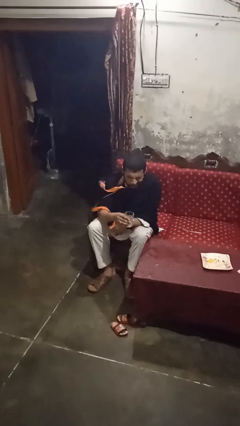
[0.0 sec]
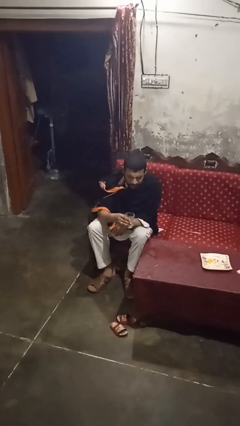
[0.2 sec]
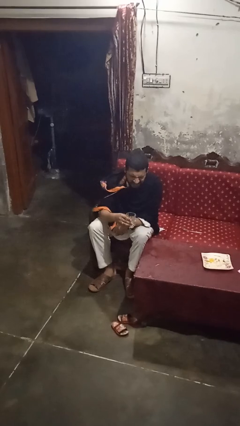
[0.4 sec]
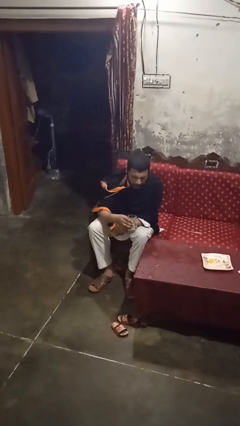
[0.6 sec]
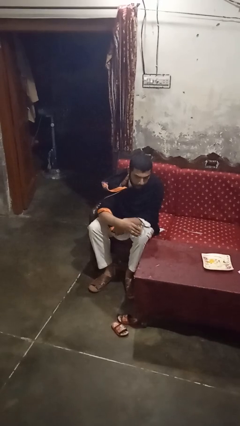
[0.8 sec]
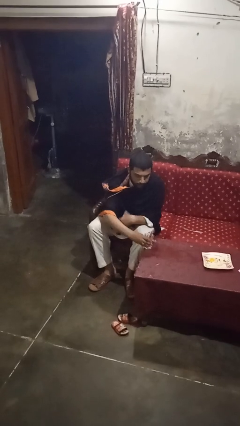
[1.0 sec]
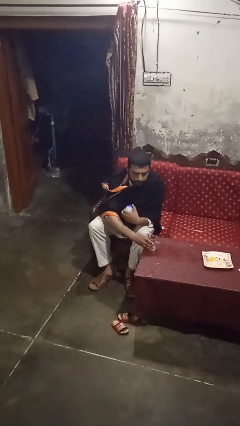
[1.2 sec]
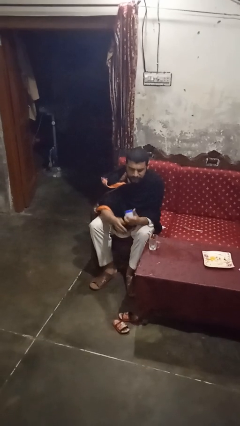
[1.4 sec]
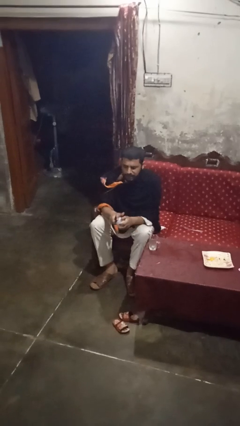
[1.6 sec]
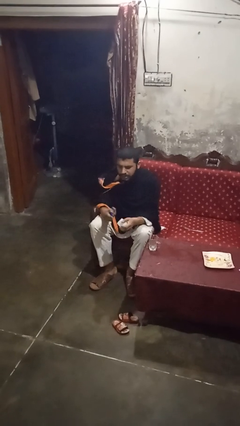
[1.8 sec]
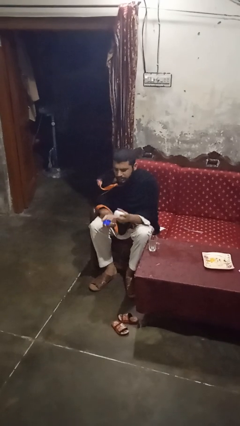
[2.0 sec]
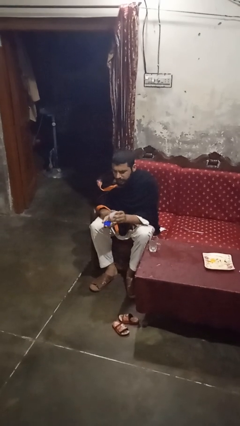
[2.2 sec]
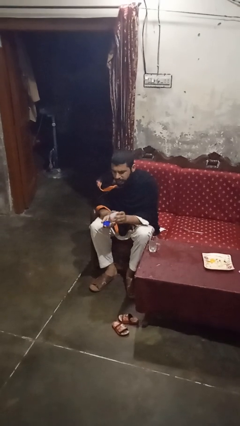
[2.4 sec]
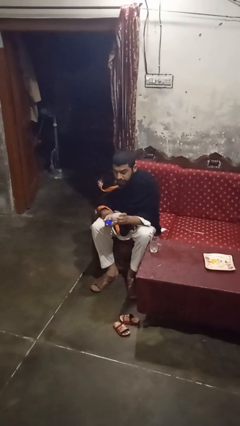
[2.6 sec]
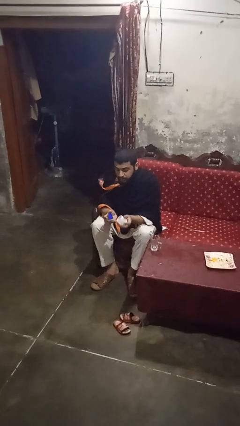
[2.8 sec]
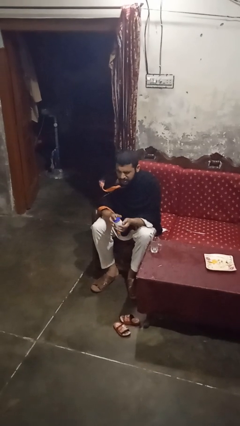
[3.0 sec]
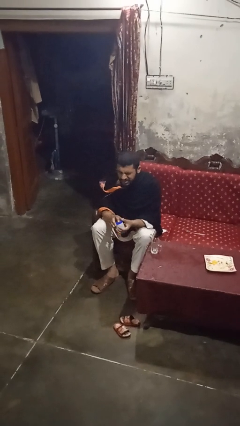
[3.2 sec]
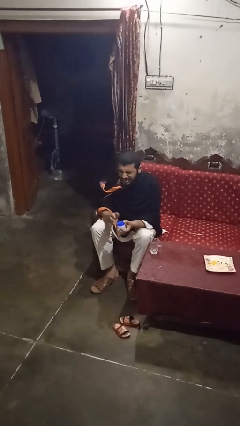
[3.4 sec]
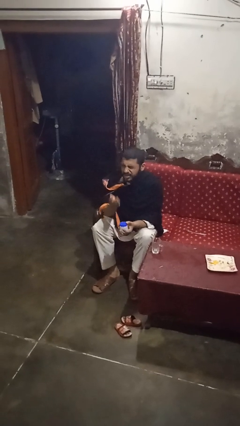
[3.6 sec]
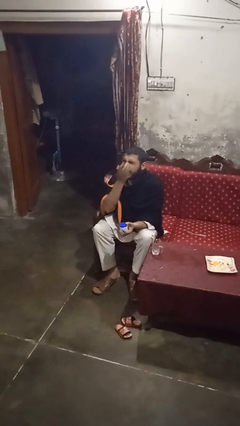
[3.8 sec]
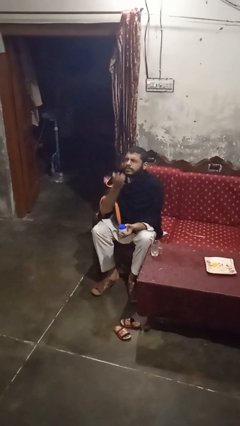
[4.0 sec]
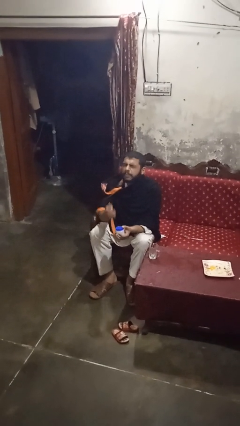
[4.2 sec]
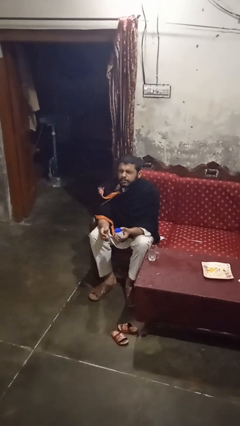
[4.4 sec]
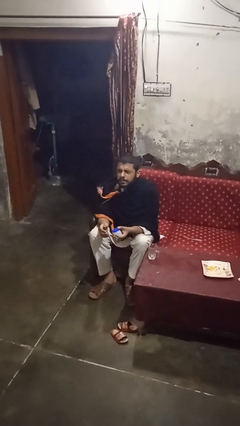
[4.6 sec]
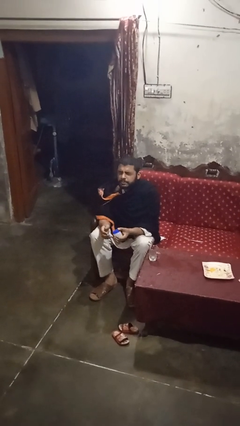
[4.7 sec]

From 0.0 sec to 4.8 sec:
person takes medicine pills

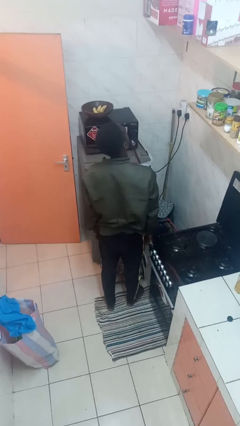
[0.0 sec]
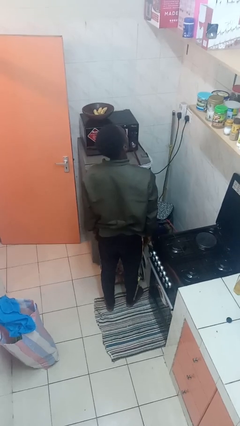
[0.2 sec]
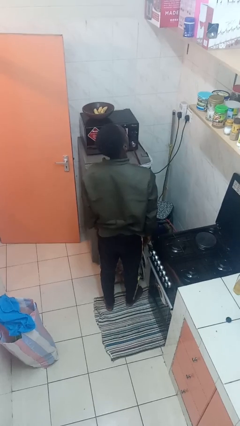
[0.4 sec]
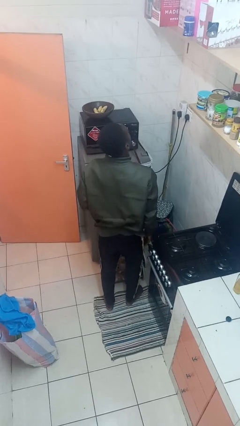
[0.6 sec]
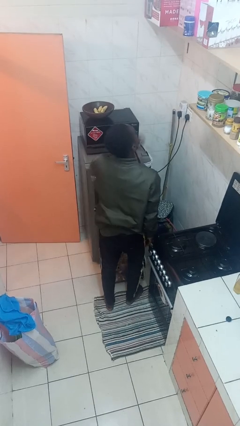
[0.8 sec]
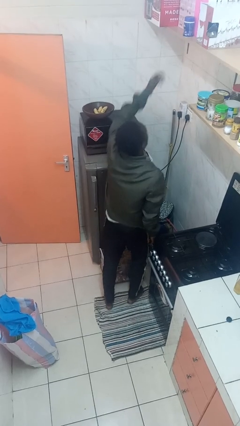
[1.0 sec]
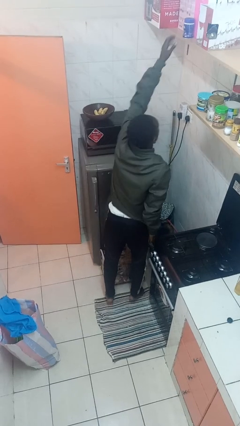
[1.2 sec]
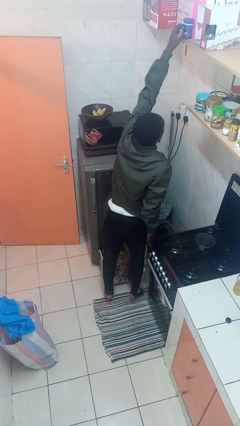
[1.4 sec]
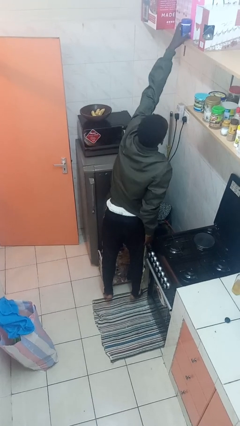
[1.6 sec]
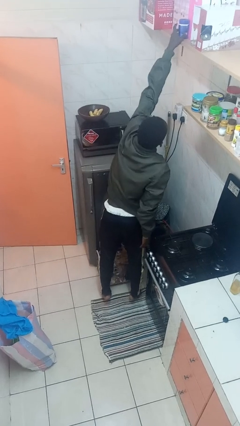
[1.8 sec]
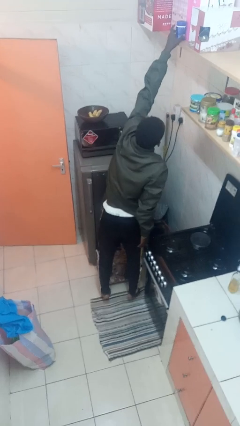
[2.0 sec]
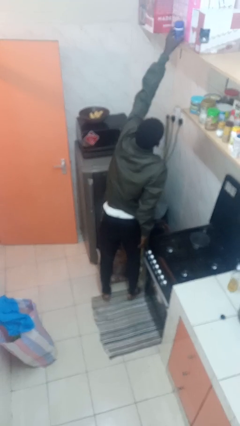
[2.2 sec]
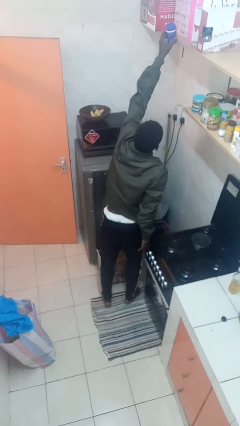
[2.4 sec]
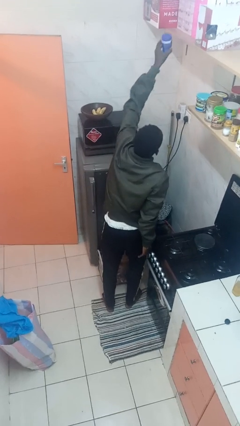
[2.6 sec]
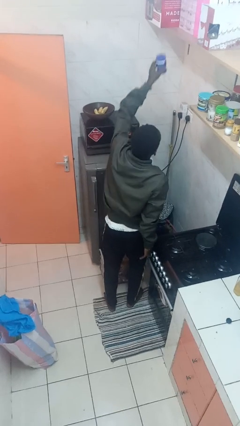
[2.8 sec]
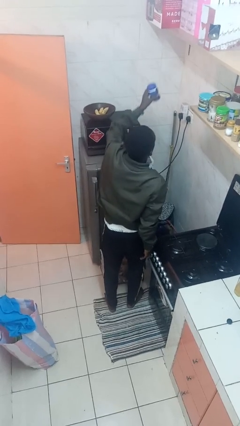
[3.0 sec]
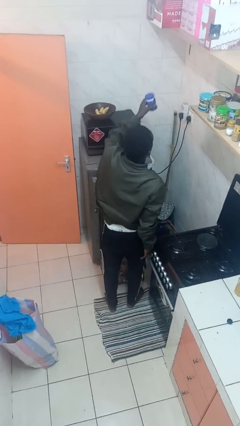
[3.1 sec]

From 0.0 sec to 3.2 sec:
person picks up object from shelf

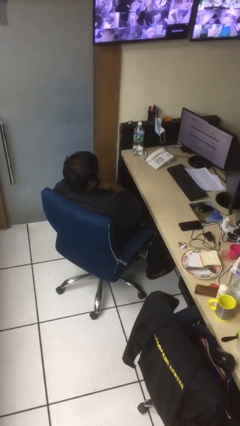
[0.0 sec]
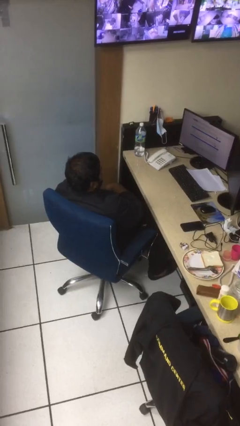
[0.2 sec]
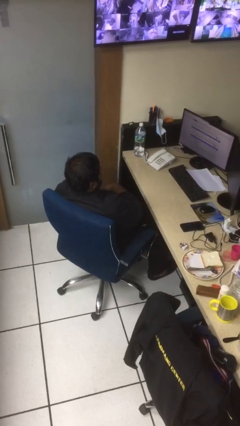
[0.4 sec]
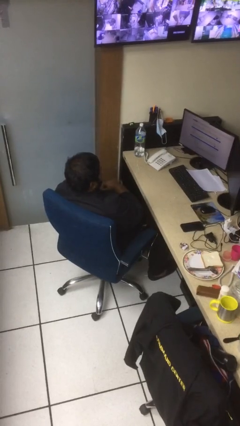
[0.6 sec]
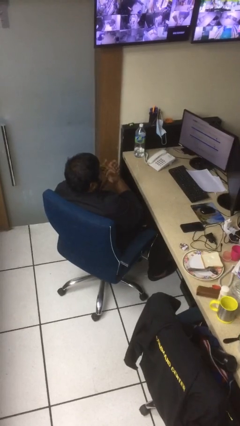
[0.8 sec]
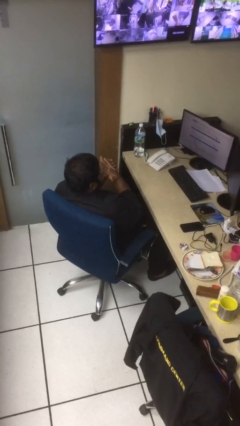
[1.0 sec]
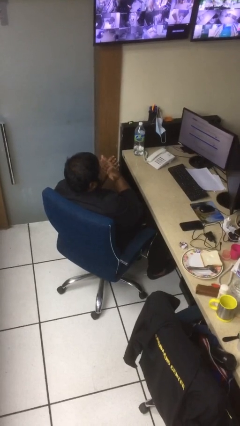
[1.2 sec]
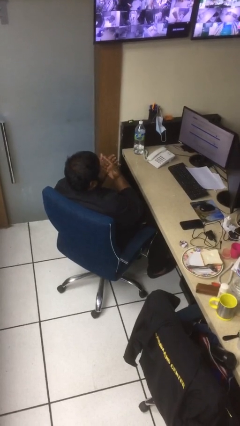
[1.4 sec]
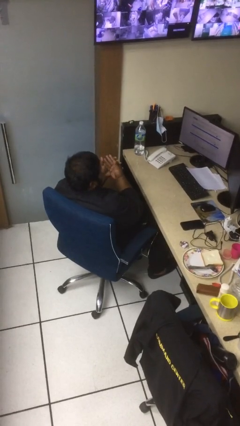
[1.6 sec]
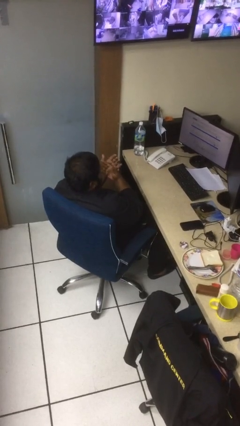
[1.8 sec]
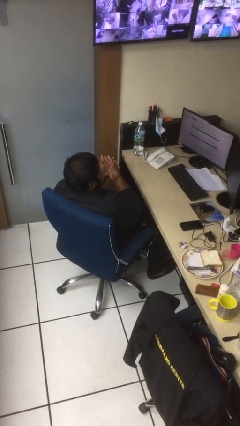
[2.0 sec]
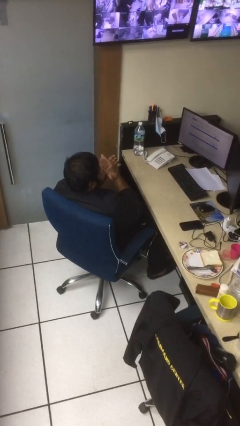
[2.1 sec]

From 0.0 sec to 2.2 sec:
person claps hands

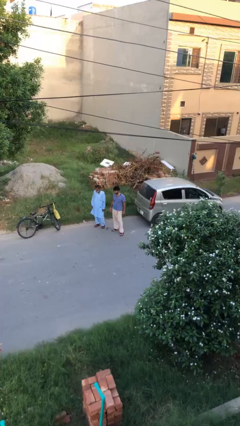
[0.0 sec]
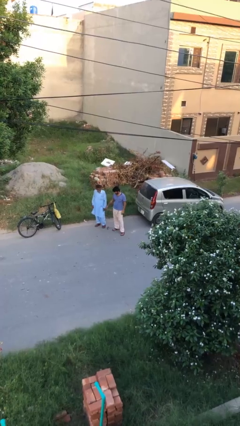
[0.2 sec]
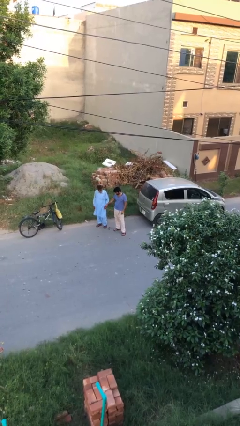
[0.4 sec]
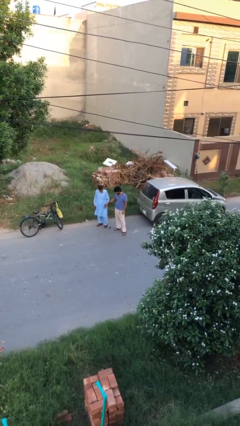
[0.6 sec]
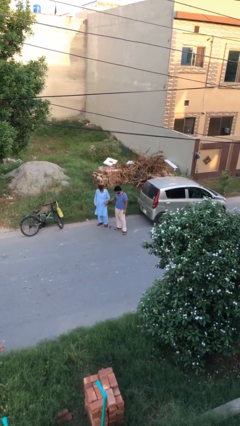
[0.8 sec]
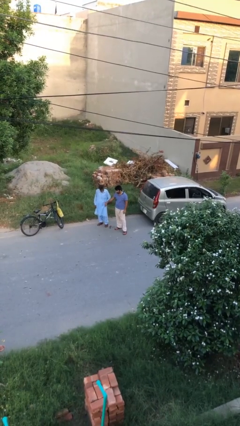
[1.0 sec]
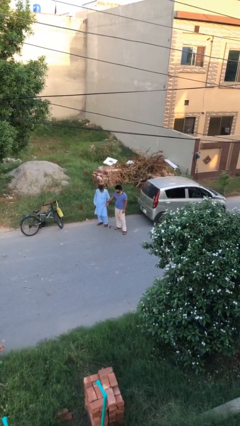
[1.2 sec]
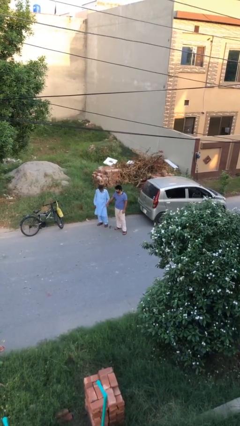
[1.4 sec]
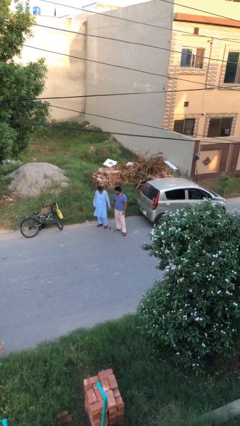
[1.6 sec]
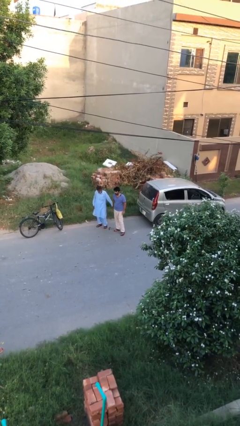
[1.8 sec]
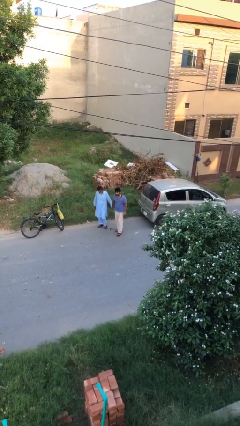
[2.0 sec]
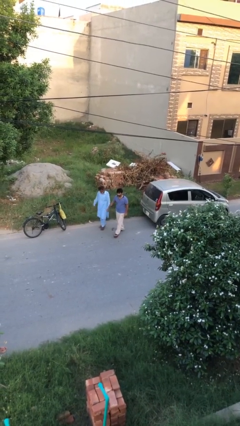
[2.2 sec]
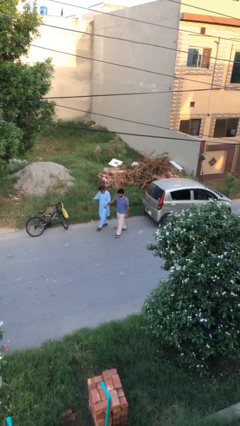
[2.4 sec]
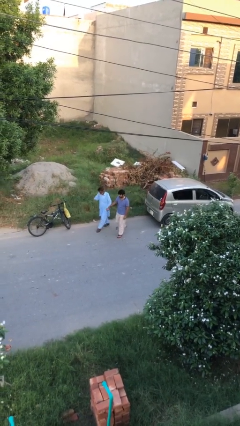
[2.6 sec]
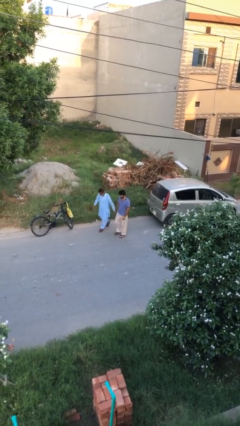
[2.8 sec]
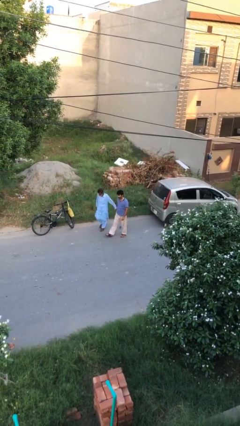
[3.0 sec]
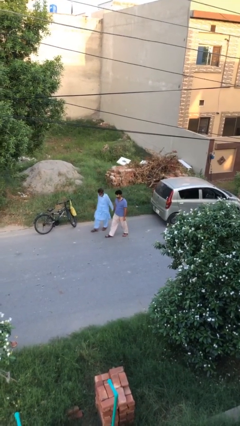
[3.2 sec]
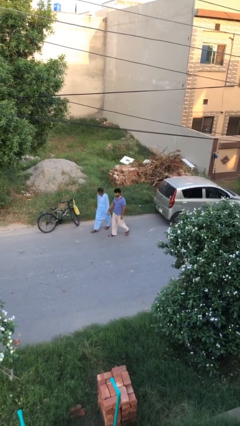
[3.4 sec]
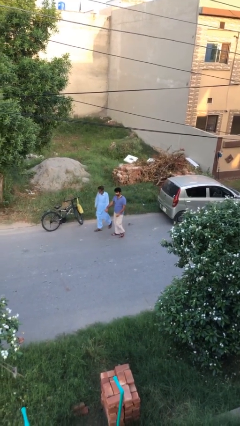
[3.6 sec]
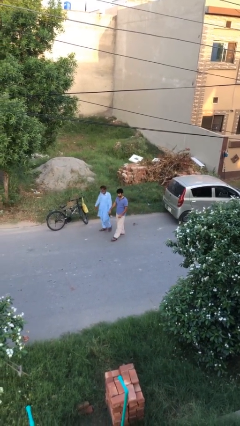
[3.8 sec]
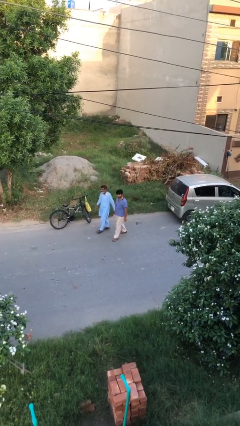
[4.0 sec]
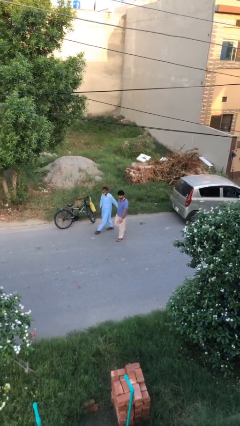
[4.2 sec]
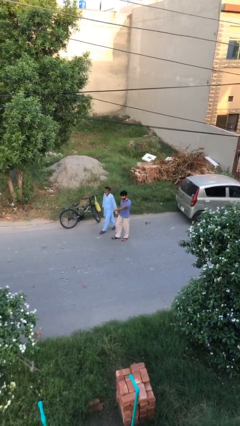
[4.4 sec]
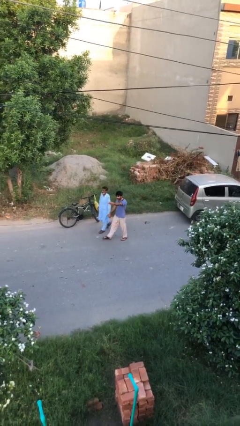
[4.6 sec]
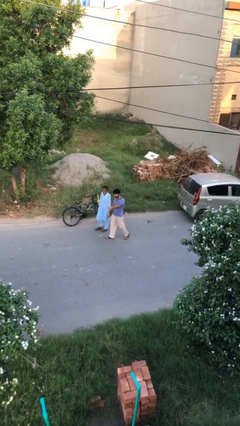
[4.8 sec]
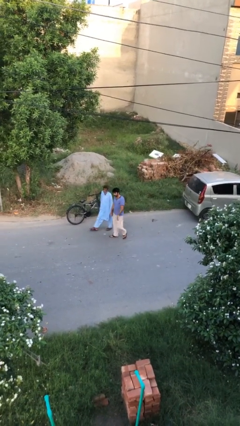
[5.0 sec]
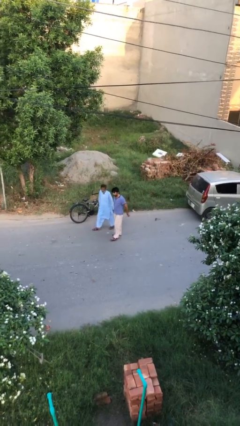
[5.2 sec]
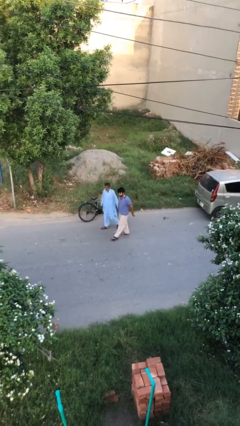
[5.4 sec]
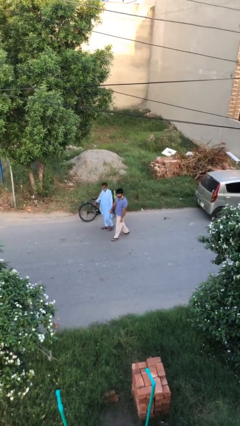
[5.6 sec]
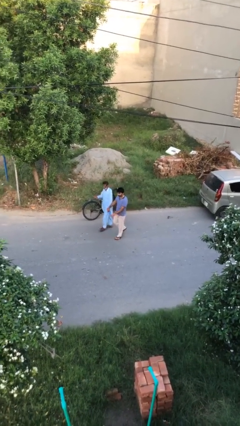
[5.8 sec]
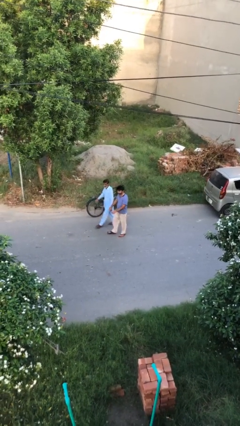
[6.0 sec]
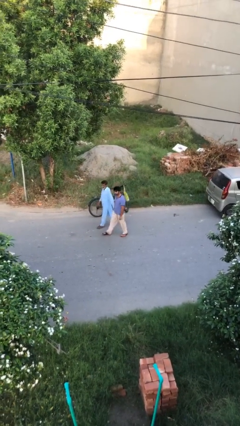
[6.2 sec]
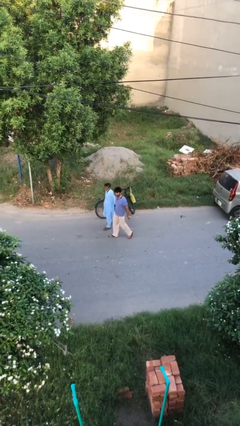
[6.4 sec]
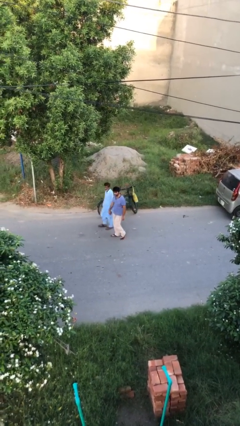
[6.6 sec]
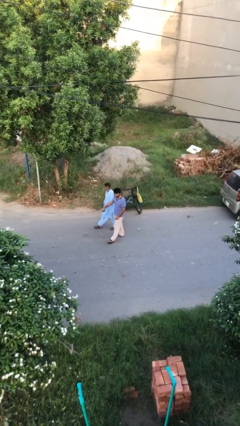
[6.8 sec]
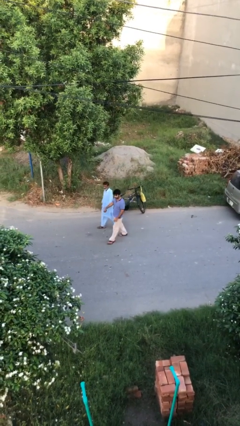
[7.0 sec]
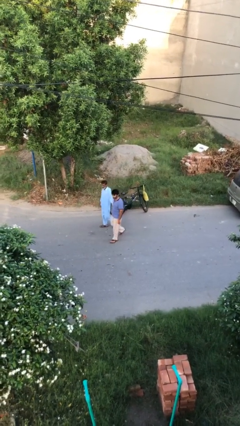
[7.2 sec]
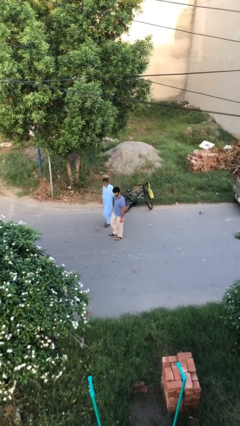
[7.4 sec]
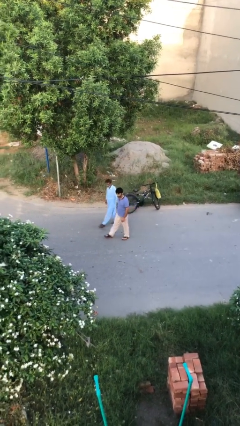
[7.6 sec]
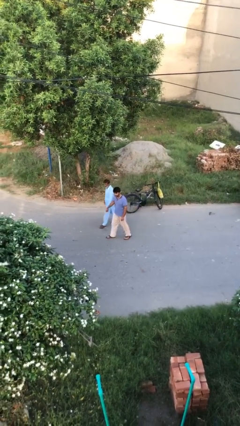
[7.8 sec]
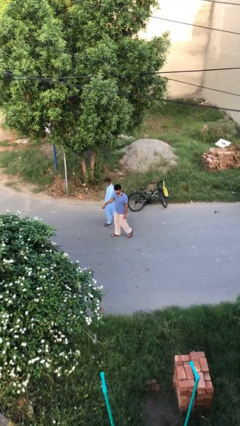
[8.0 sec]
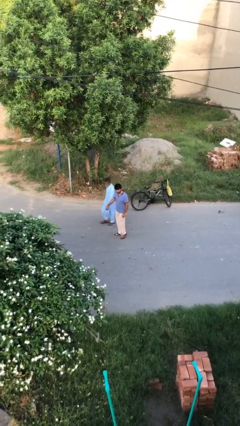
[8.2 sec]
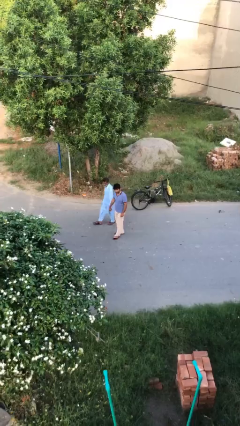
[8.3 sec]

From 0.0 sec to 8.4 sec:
person holds hand
